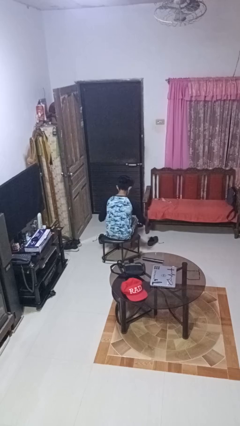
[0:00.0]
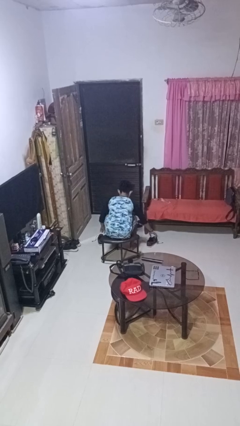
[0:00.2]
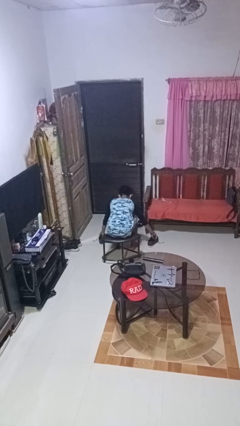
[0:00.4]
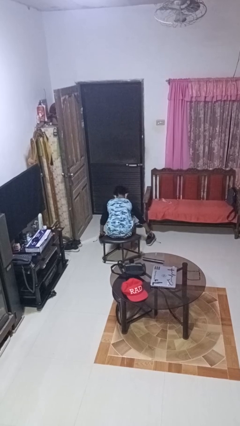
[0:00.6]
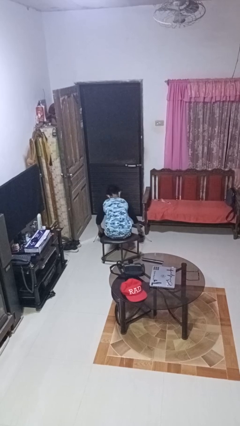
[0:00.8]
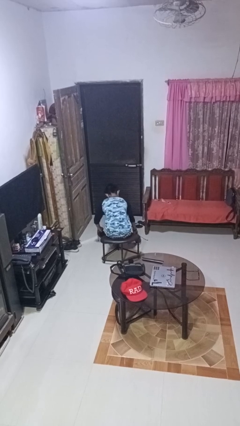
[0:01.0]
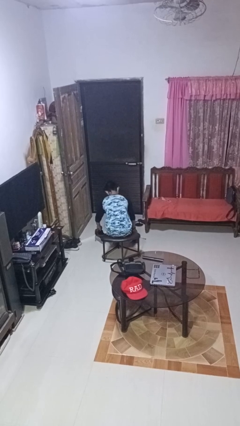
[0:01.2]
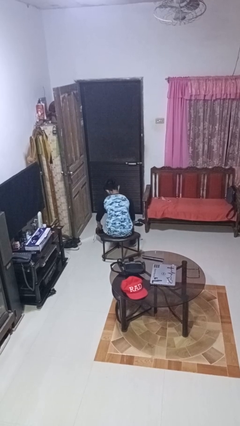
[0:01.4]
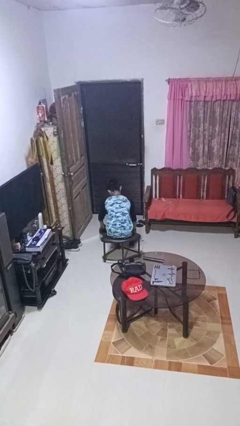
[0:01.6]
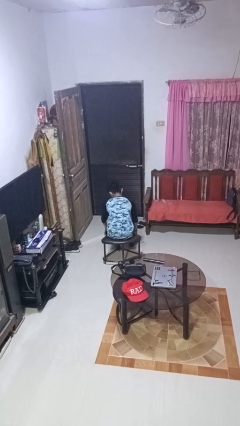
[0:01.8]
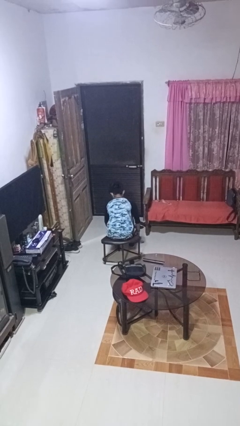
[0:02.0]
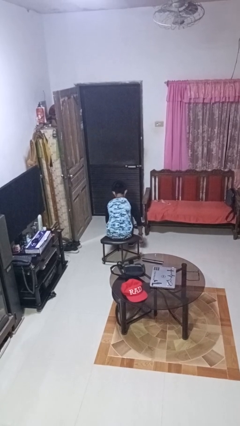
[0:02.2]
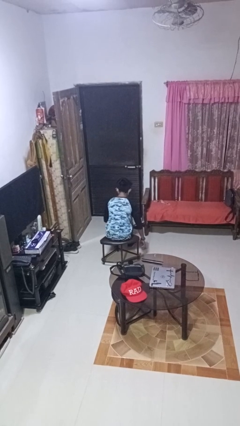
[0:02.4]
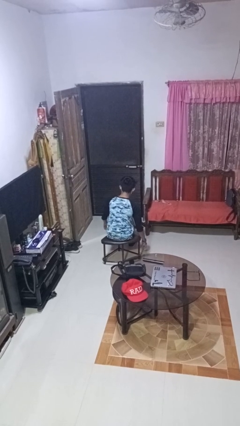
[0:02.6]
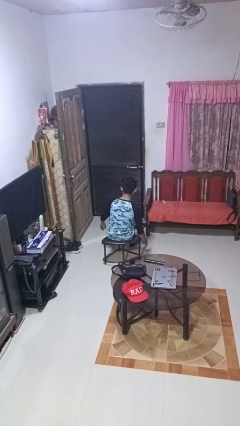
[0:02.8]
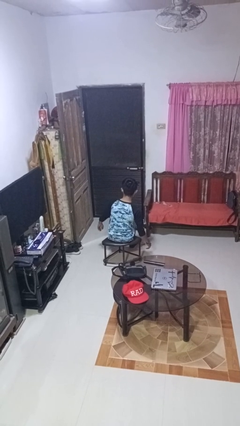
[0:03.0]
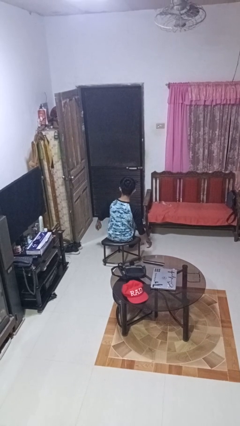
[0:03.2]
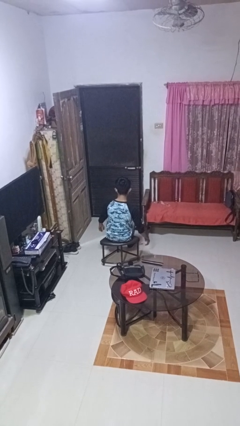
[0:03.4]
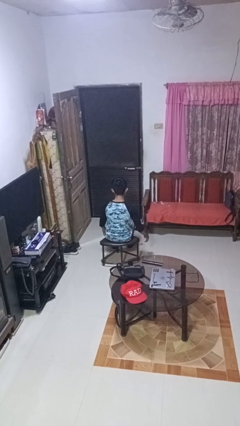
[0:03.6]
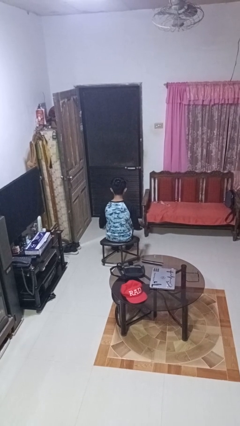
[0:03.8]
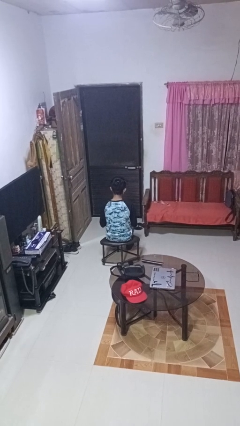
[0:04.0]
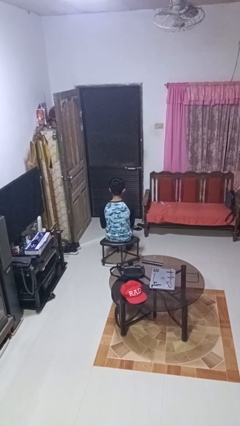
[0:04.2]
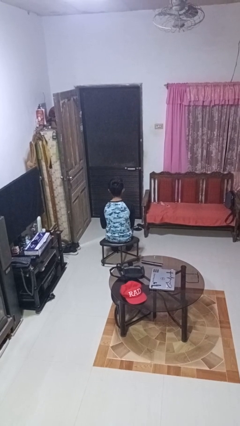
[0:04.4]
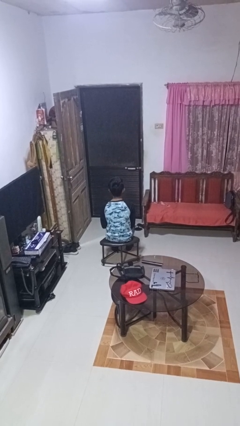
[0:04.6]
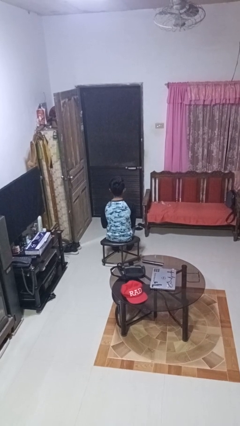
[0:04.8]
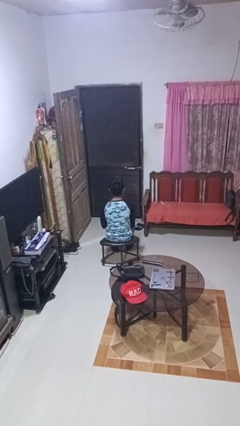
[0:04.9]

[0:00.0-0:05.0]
person puts on shoes

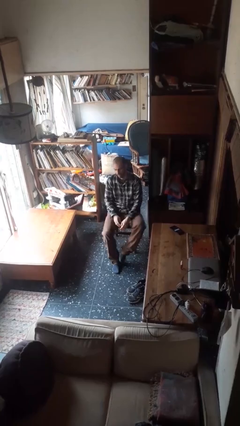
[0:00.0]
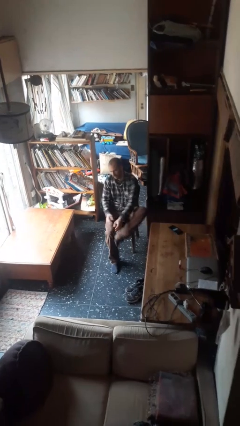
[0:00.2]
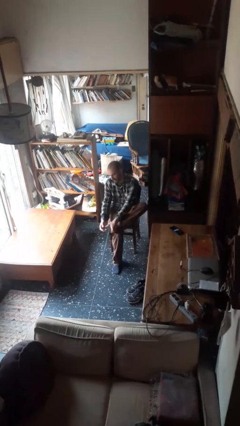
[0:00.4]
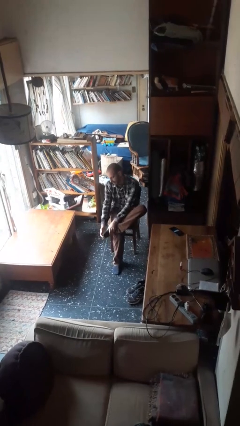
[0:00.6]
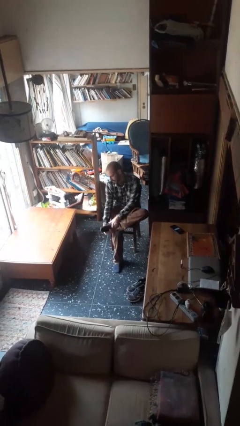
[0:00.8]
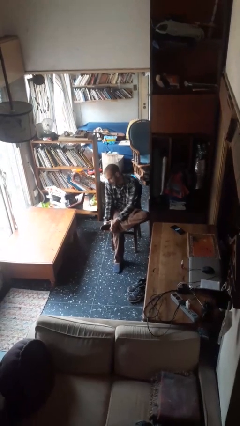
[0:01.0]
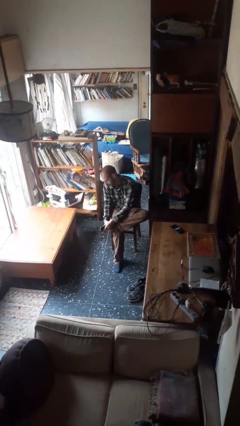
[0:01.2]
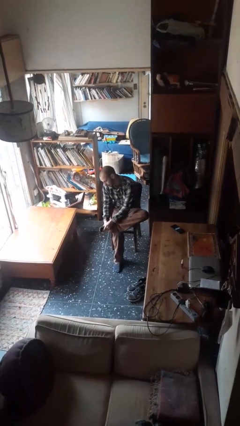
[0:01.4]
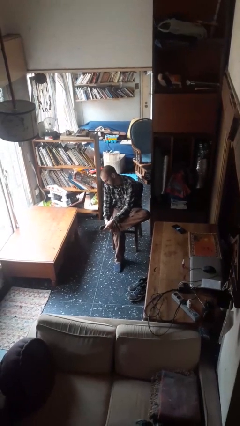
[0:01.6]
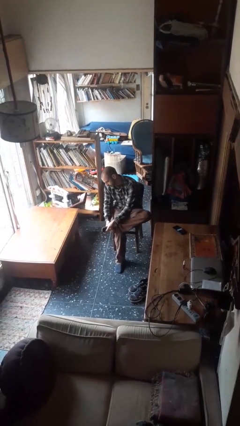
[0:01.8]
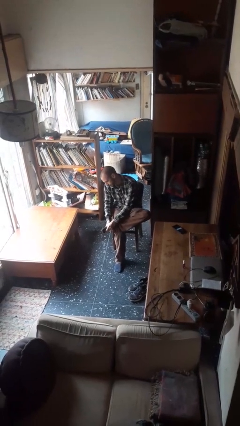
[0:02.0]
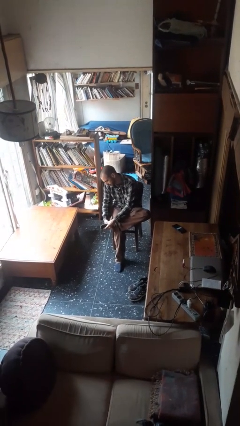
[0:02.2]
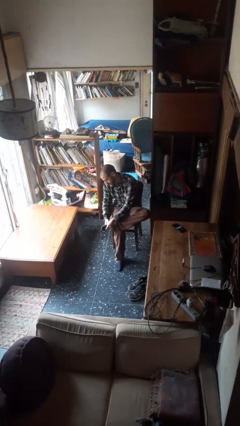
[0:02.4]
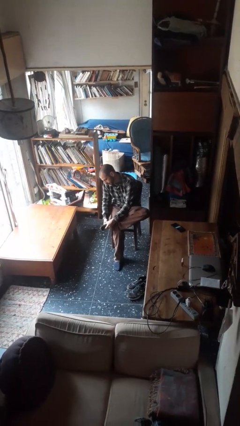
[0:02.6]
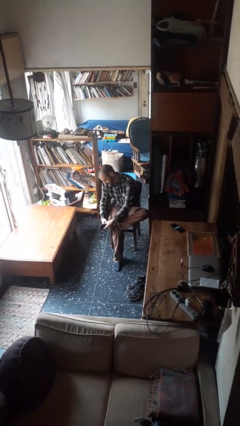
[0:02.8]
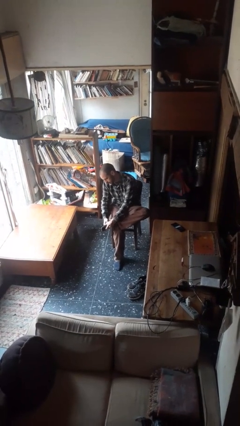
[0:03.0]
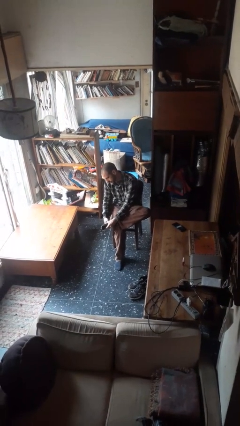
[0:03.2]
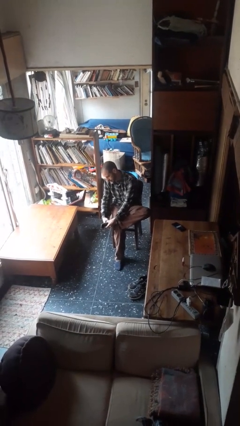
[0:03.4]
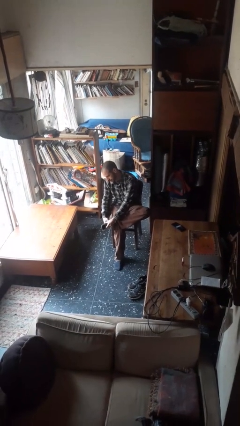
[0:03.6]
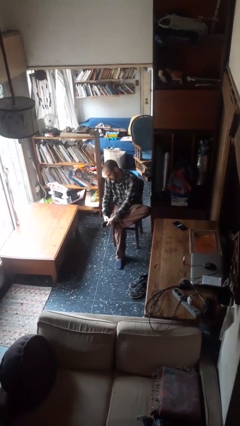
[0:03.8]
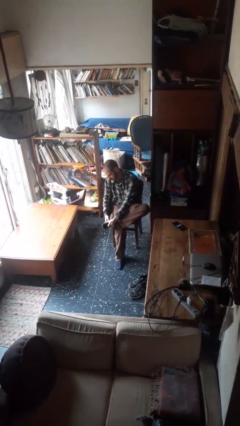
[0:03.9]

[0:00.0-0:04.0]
person rubs foot

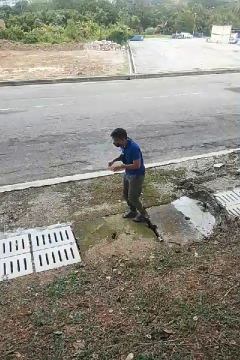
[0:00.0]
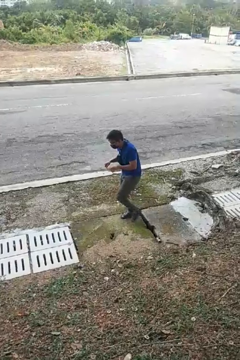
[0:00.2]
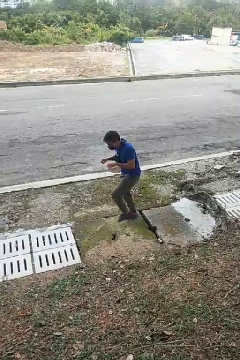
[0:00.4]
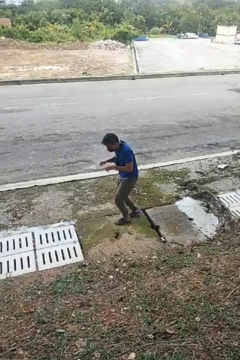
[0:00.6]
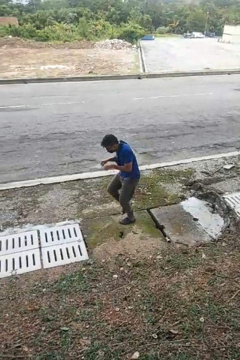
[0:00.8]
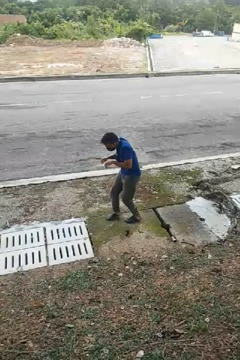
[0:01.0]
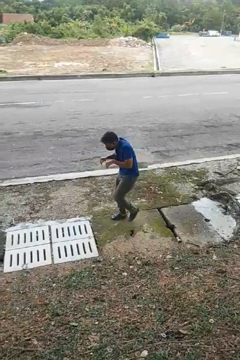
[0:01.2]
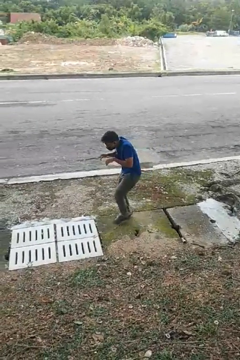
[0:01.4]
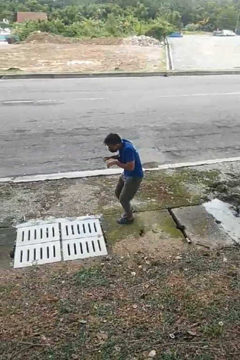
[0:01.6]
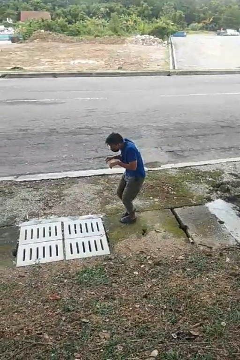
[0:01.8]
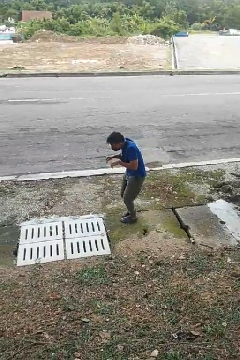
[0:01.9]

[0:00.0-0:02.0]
person walks tiptoe

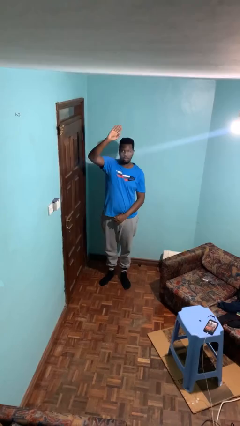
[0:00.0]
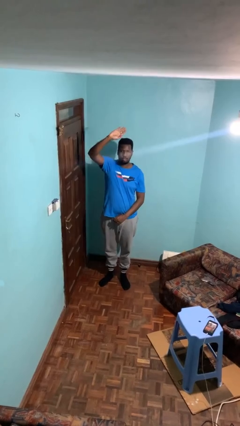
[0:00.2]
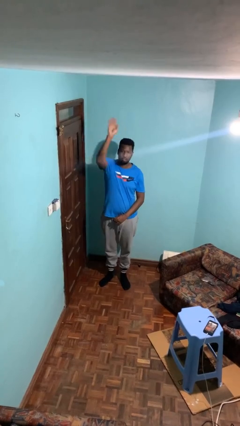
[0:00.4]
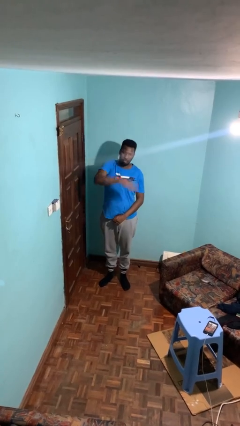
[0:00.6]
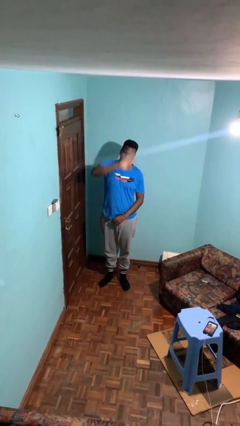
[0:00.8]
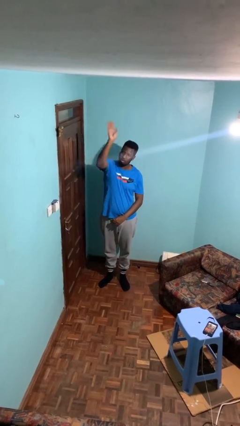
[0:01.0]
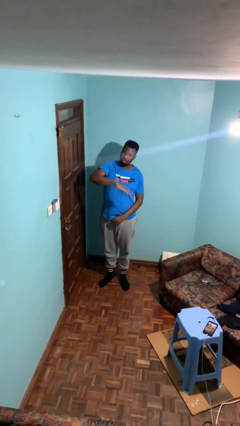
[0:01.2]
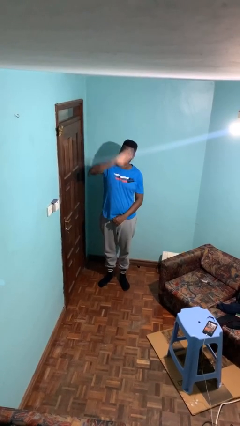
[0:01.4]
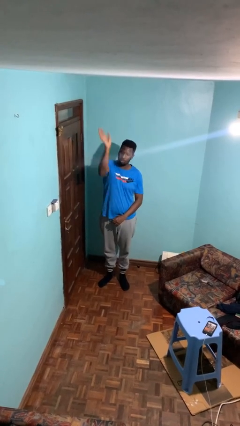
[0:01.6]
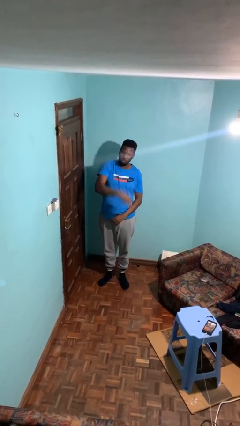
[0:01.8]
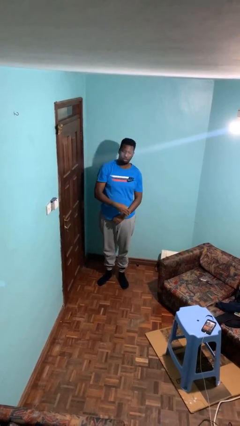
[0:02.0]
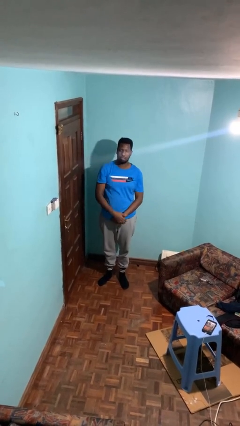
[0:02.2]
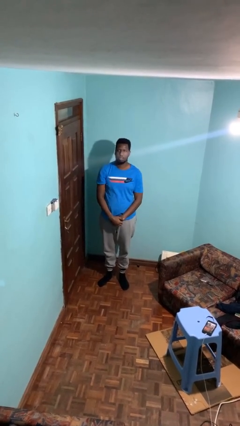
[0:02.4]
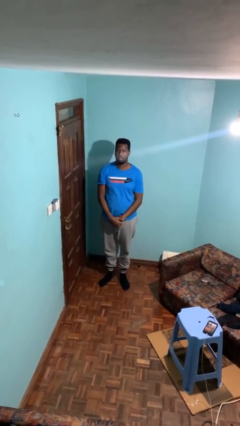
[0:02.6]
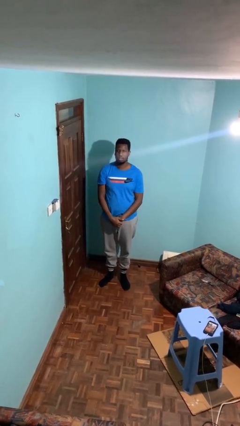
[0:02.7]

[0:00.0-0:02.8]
person gestures swipe down

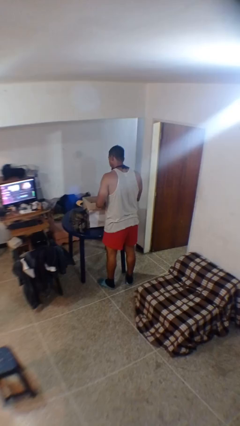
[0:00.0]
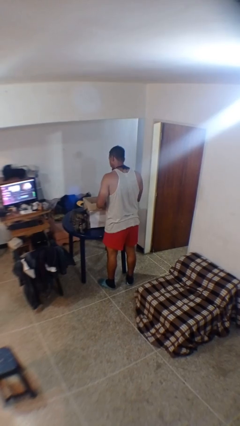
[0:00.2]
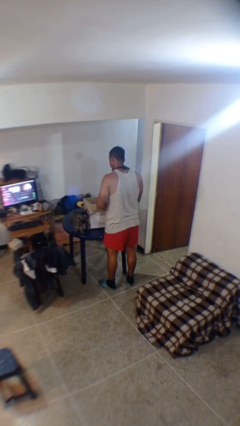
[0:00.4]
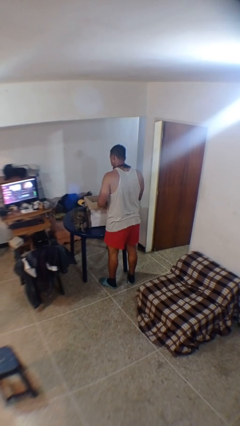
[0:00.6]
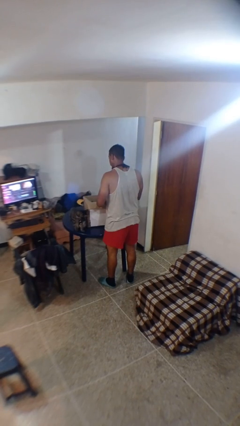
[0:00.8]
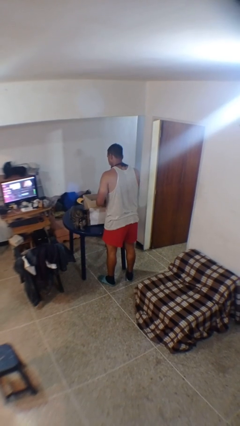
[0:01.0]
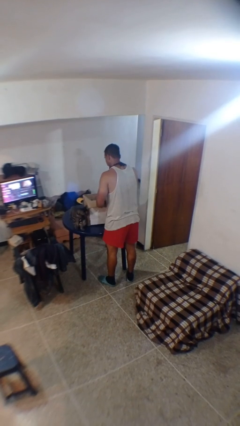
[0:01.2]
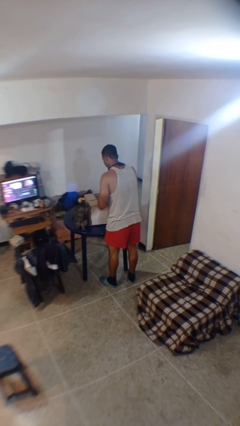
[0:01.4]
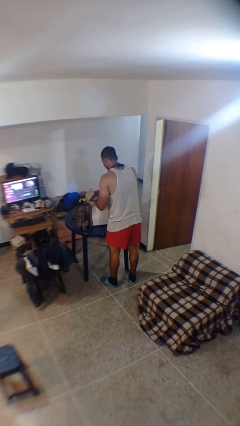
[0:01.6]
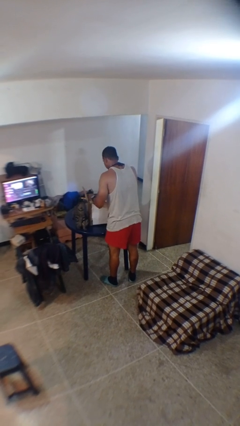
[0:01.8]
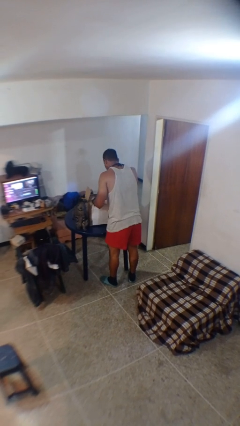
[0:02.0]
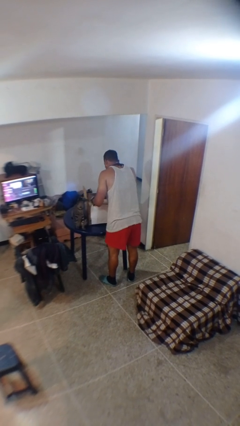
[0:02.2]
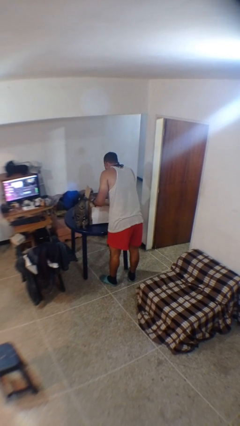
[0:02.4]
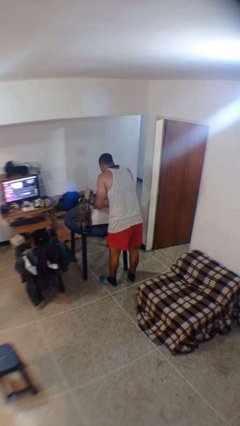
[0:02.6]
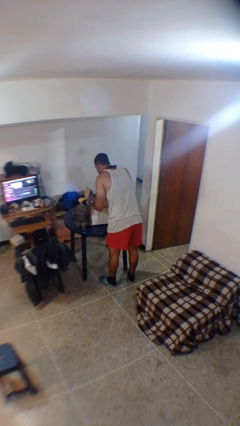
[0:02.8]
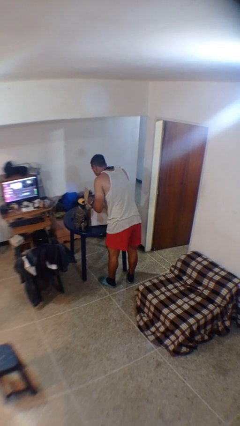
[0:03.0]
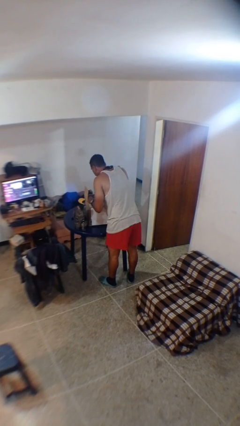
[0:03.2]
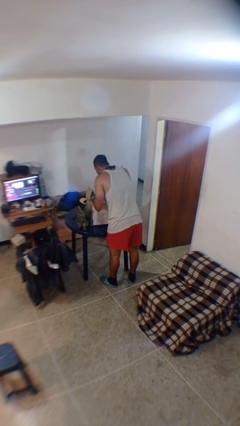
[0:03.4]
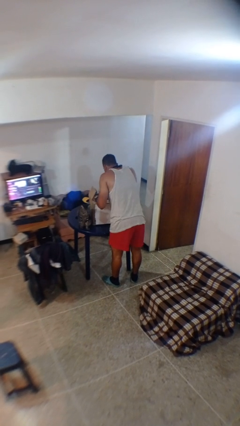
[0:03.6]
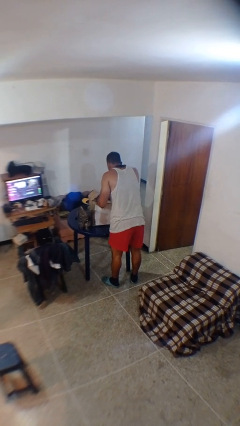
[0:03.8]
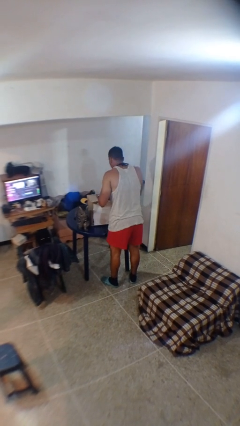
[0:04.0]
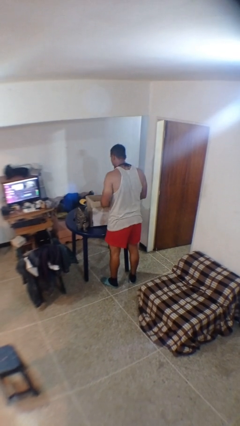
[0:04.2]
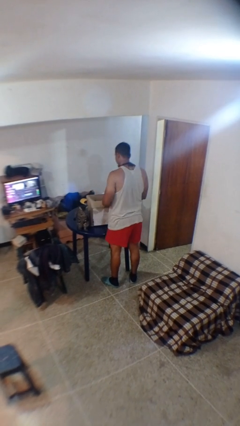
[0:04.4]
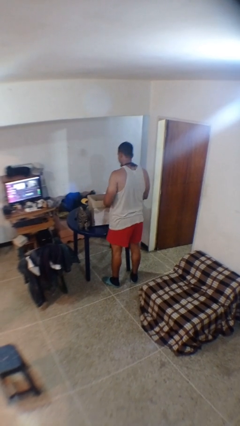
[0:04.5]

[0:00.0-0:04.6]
person searches in box
